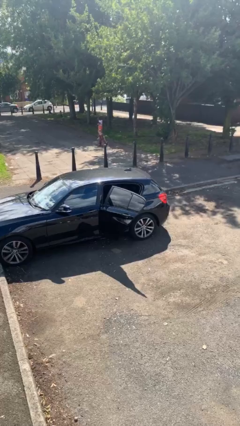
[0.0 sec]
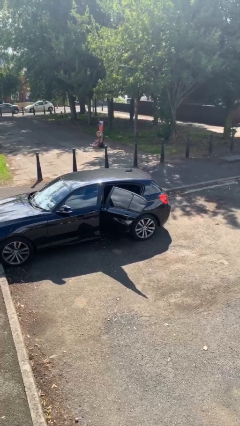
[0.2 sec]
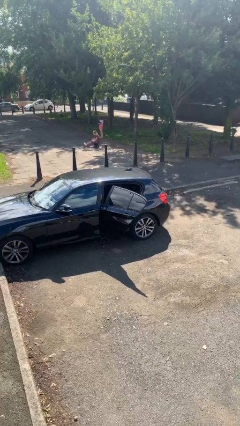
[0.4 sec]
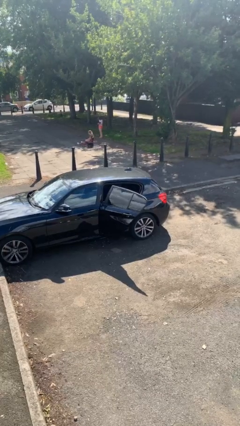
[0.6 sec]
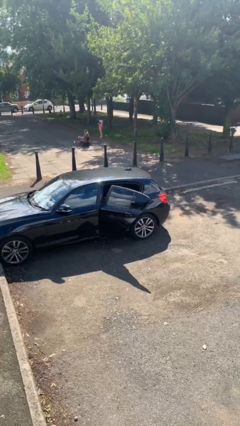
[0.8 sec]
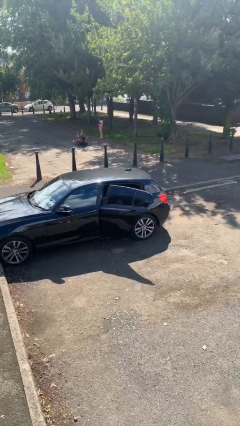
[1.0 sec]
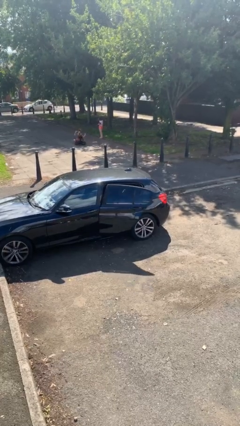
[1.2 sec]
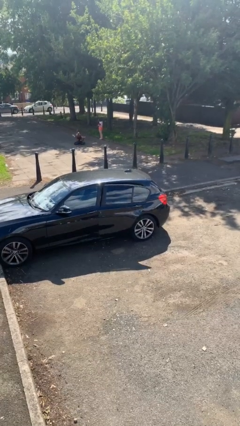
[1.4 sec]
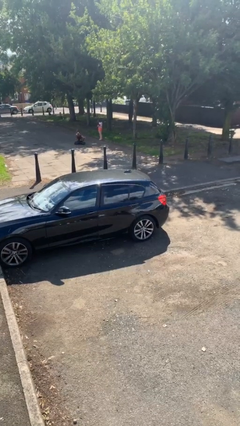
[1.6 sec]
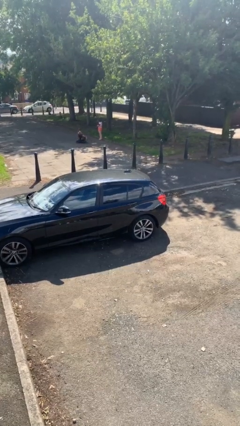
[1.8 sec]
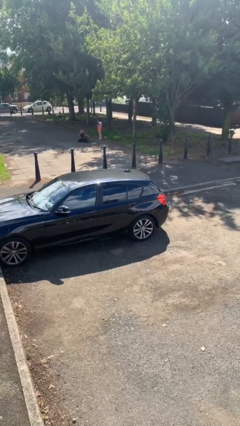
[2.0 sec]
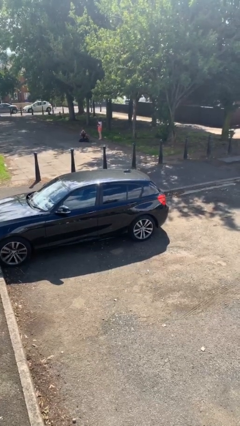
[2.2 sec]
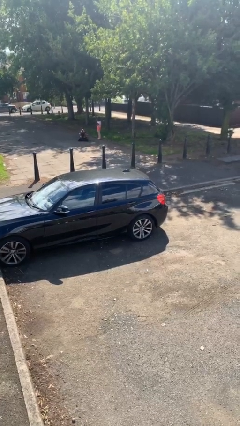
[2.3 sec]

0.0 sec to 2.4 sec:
person closes car door

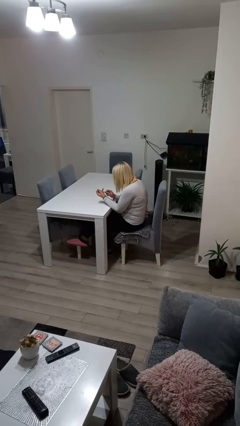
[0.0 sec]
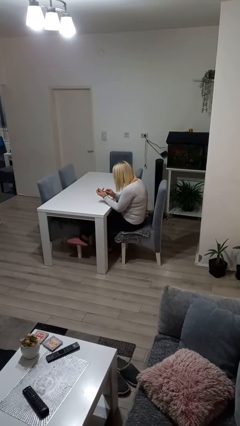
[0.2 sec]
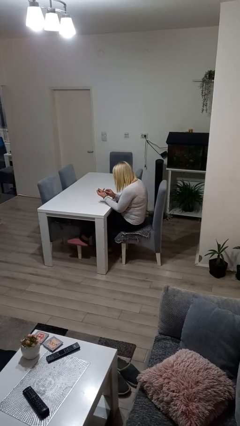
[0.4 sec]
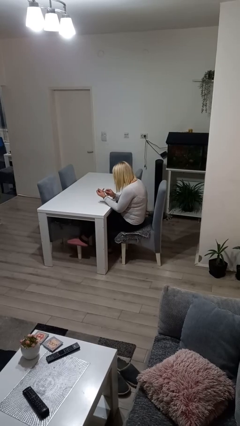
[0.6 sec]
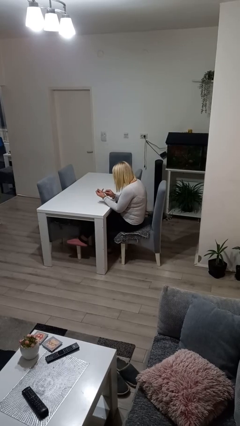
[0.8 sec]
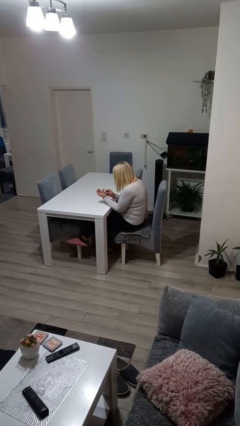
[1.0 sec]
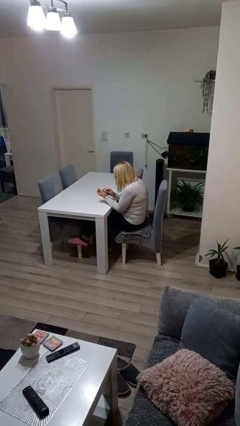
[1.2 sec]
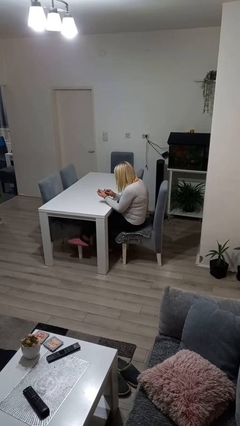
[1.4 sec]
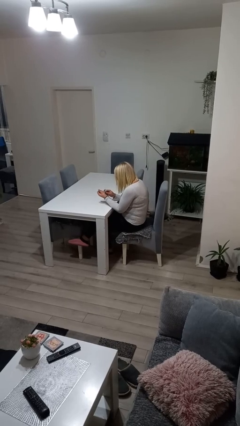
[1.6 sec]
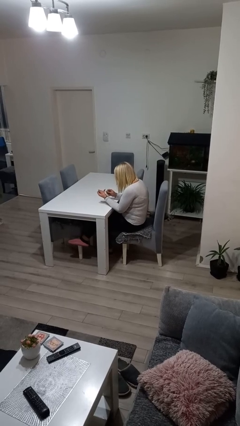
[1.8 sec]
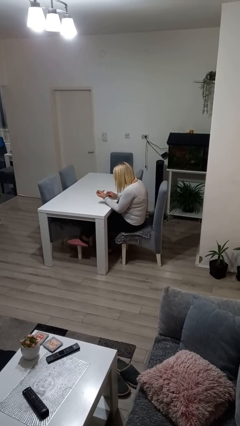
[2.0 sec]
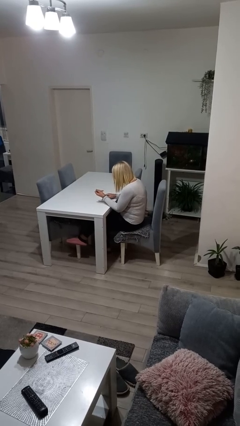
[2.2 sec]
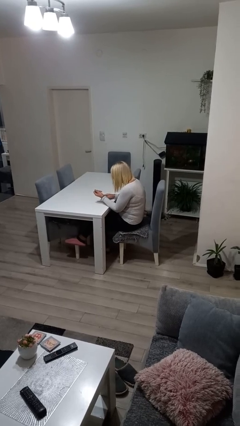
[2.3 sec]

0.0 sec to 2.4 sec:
person files fingernails

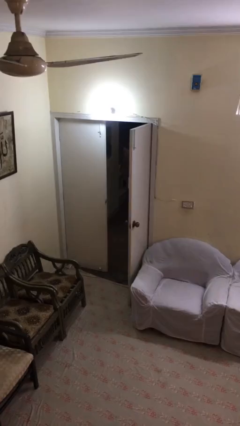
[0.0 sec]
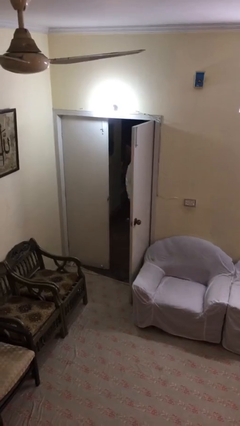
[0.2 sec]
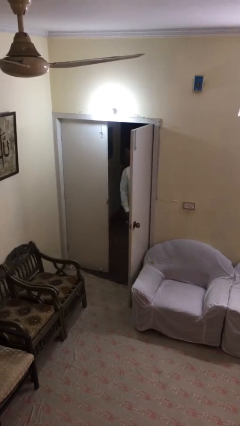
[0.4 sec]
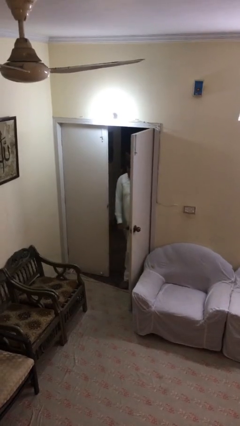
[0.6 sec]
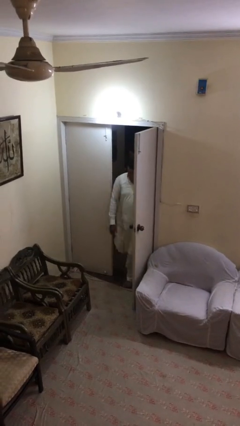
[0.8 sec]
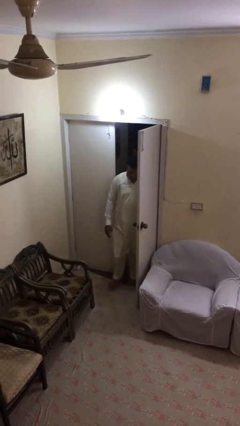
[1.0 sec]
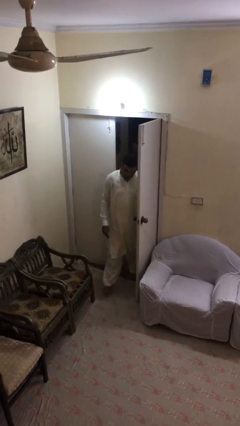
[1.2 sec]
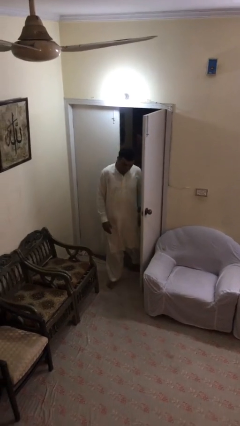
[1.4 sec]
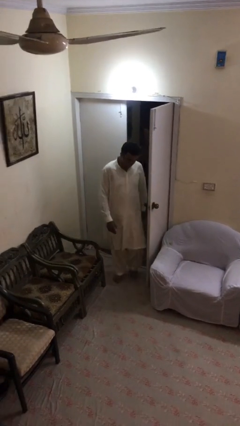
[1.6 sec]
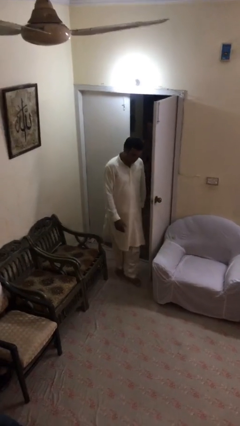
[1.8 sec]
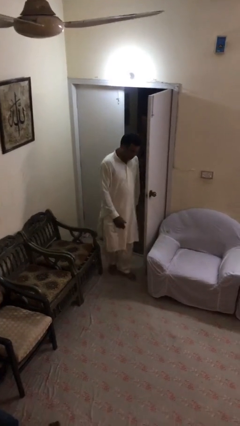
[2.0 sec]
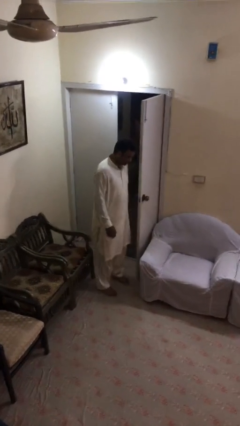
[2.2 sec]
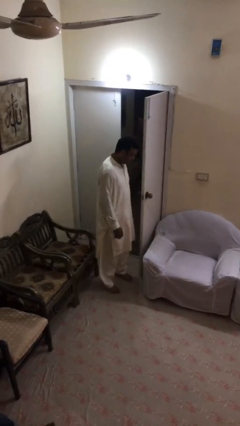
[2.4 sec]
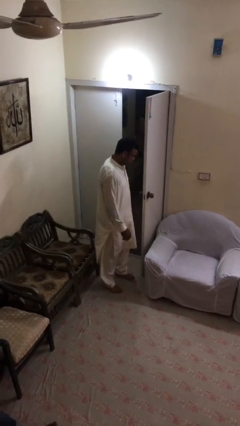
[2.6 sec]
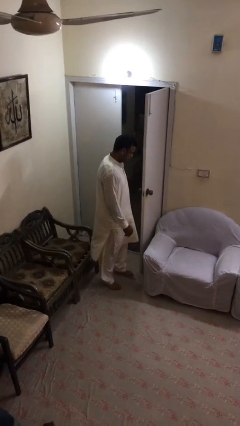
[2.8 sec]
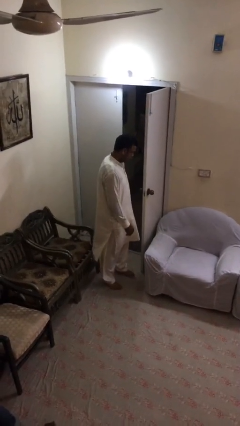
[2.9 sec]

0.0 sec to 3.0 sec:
person enters scene through structure

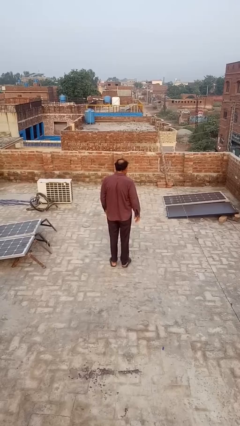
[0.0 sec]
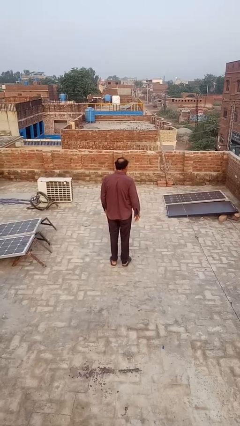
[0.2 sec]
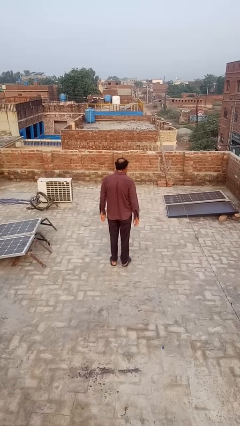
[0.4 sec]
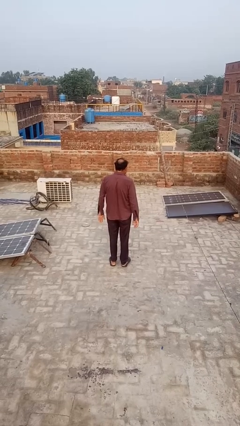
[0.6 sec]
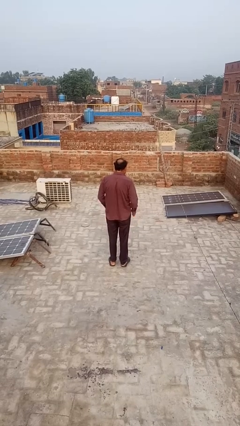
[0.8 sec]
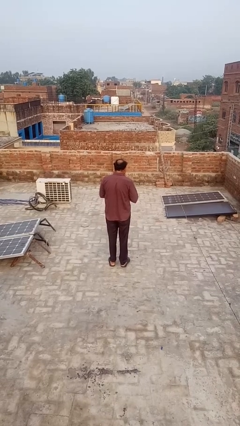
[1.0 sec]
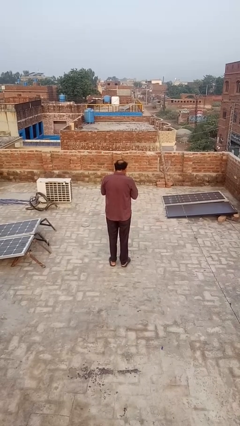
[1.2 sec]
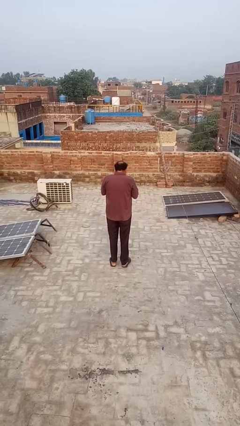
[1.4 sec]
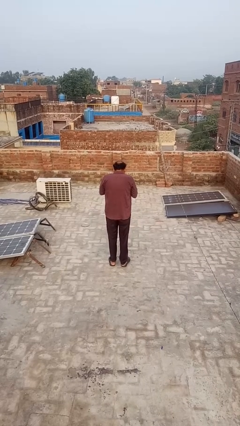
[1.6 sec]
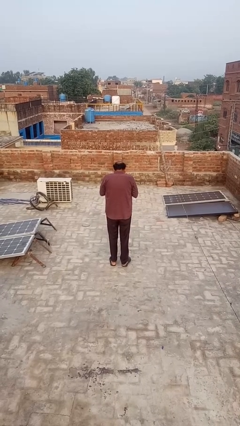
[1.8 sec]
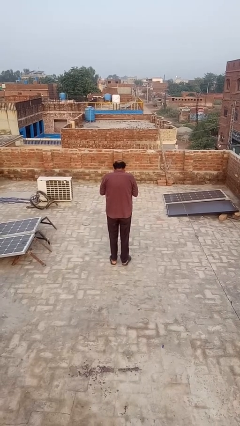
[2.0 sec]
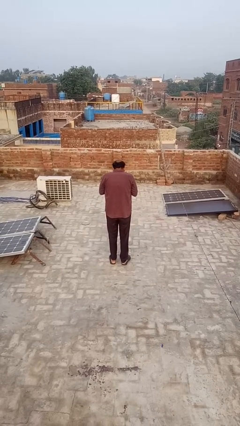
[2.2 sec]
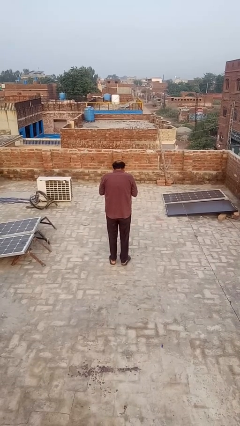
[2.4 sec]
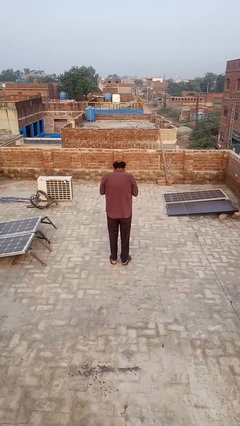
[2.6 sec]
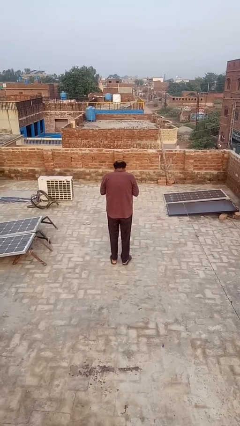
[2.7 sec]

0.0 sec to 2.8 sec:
person blows into hands

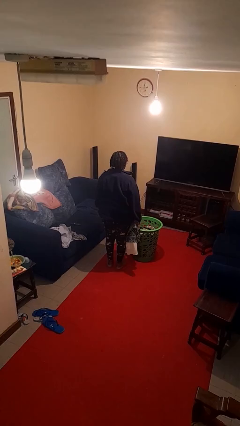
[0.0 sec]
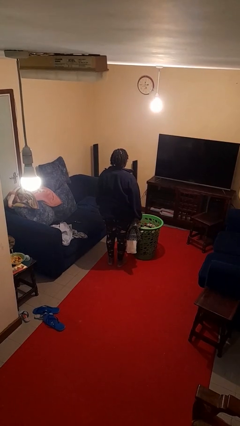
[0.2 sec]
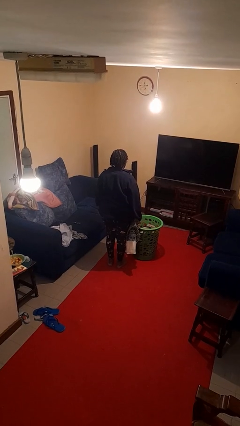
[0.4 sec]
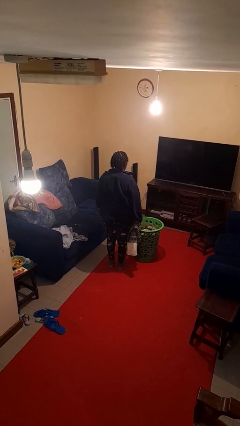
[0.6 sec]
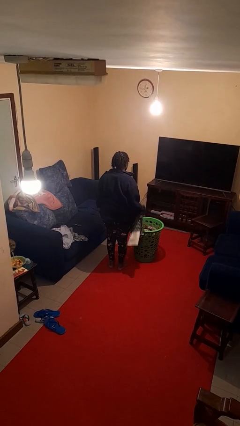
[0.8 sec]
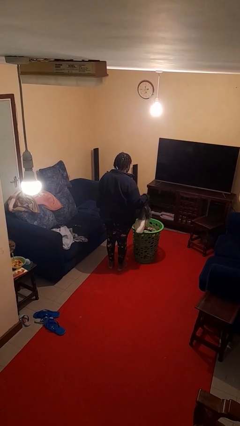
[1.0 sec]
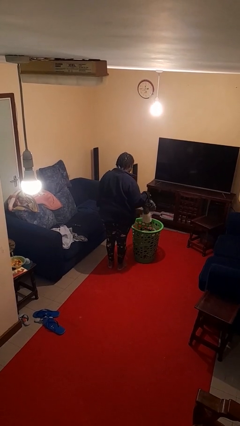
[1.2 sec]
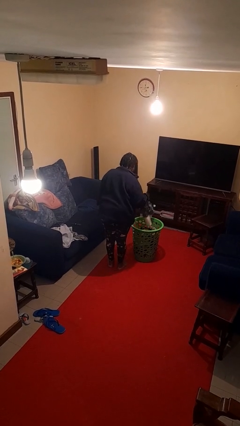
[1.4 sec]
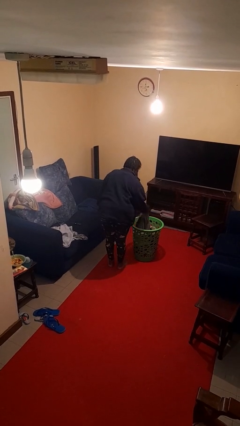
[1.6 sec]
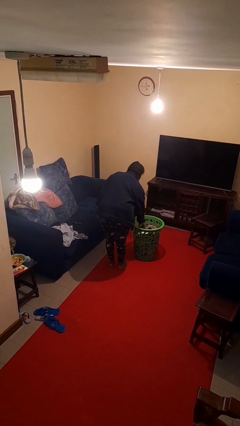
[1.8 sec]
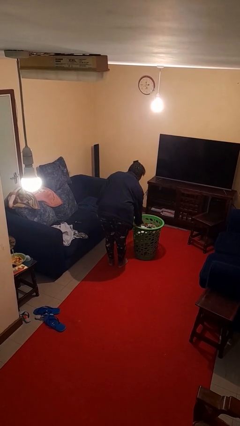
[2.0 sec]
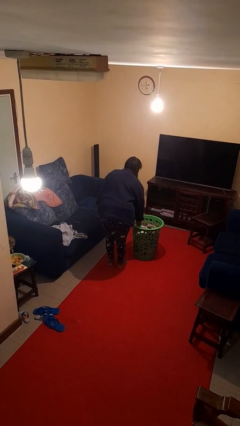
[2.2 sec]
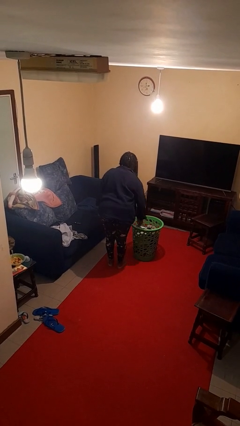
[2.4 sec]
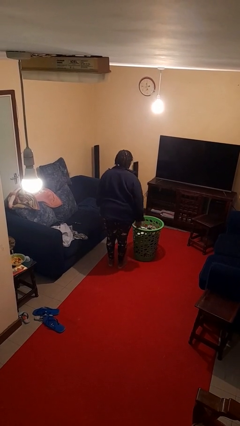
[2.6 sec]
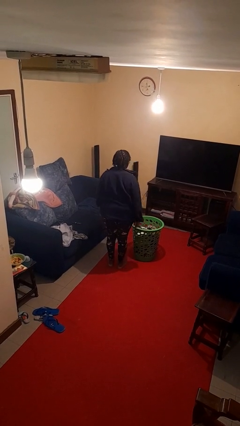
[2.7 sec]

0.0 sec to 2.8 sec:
person puts object into basket

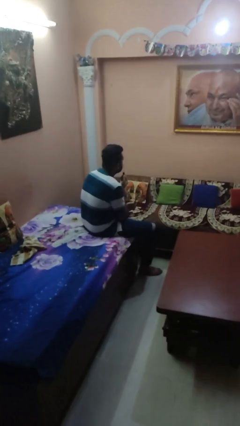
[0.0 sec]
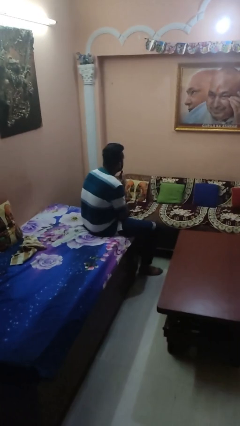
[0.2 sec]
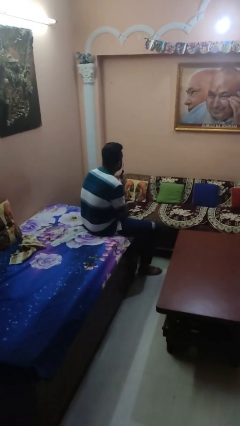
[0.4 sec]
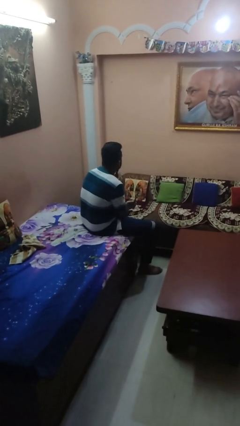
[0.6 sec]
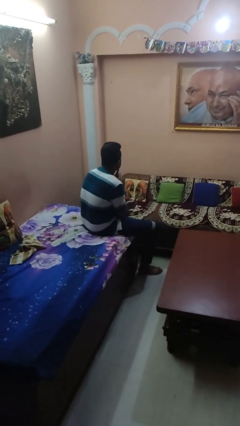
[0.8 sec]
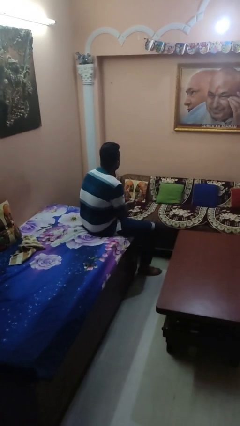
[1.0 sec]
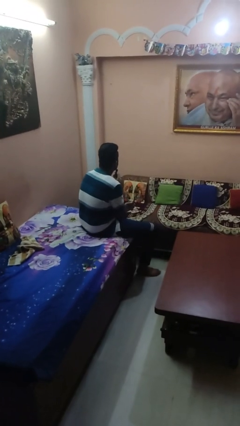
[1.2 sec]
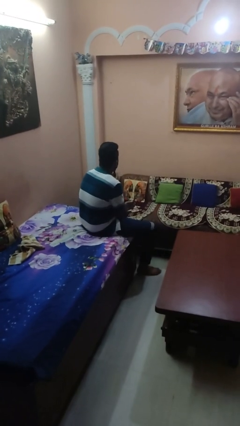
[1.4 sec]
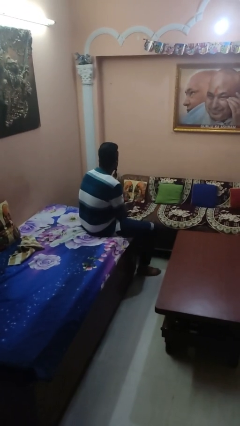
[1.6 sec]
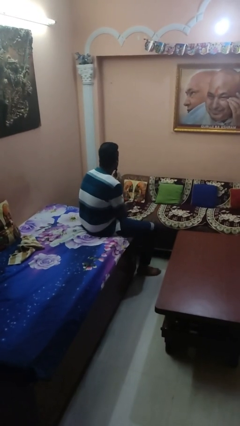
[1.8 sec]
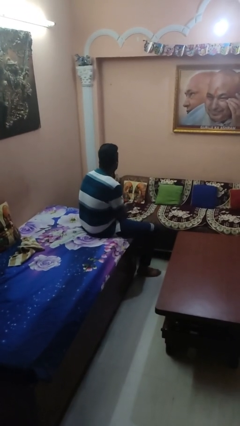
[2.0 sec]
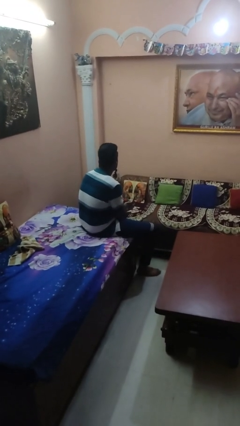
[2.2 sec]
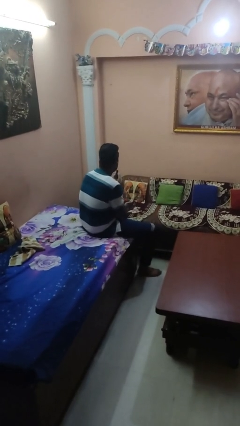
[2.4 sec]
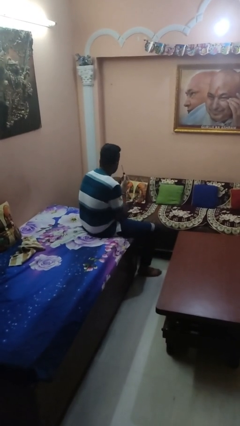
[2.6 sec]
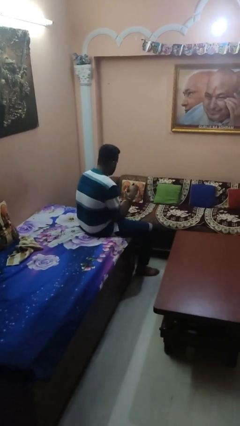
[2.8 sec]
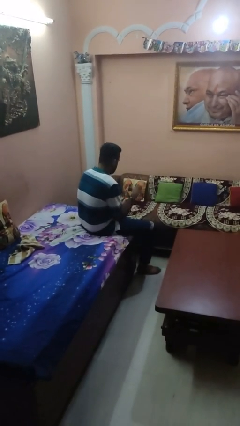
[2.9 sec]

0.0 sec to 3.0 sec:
person applies lip makeup

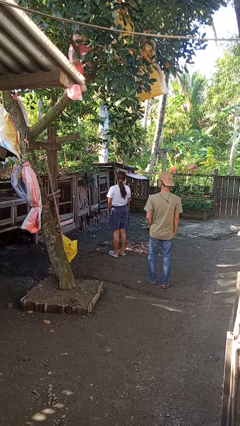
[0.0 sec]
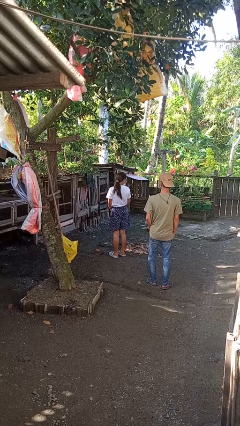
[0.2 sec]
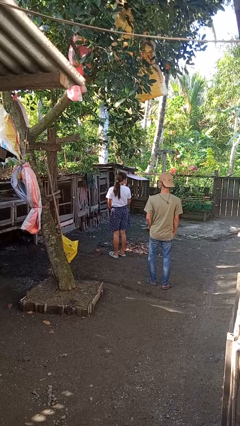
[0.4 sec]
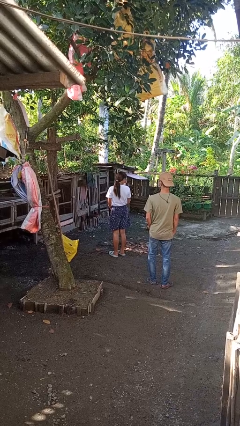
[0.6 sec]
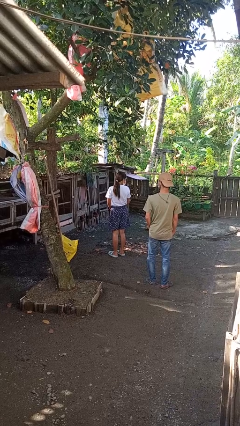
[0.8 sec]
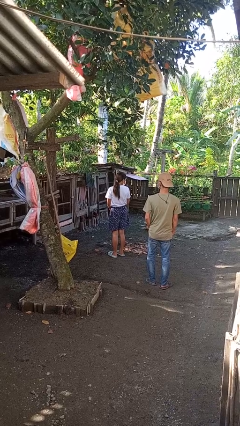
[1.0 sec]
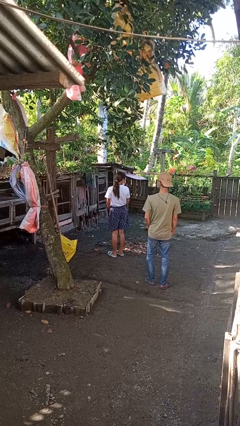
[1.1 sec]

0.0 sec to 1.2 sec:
person looks over shoulder
